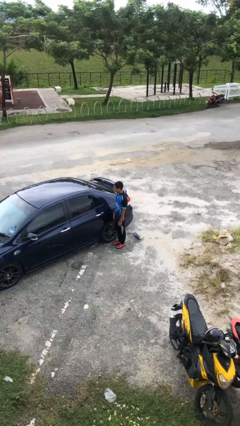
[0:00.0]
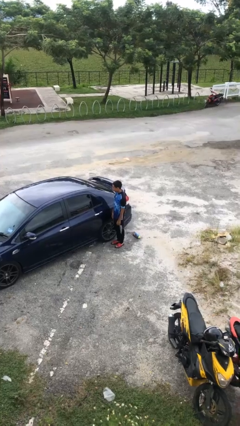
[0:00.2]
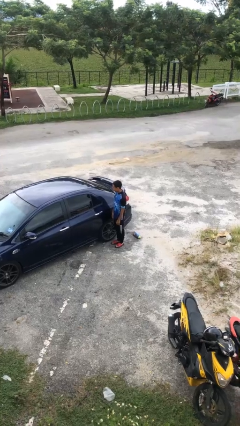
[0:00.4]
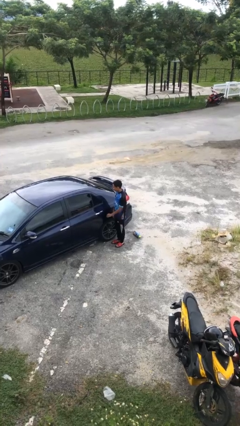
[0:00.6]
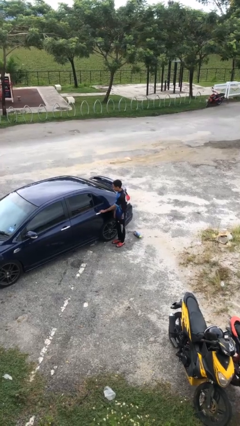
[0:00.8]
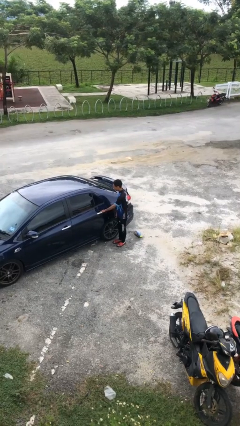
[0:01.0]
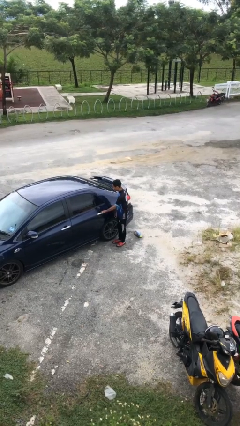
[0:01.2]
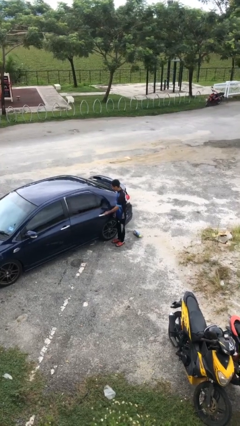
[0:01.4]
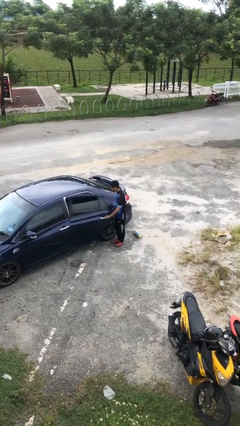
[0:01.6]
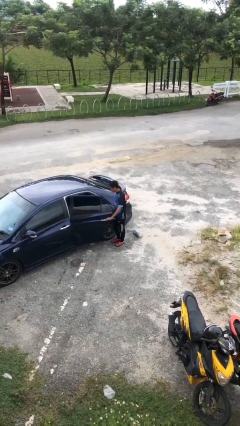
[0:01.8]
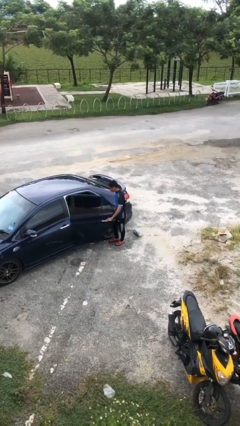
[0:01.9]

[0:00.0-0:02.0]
person opens car door

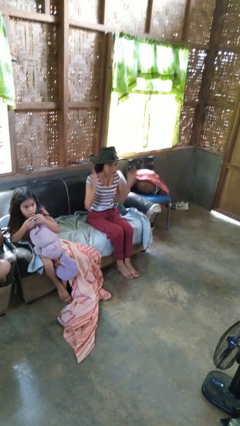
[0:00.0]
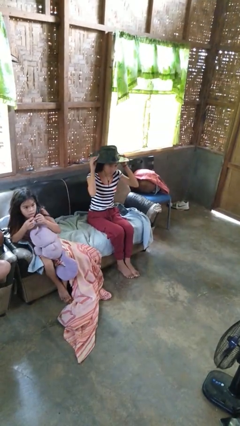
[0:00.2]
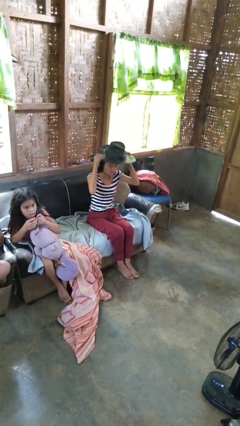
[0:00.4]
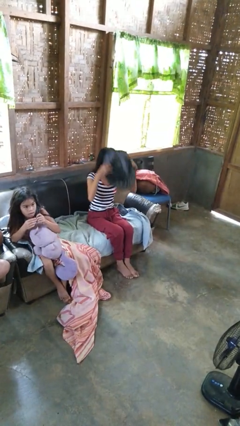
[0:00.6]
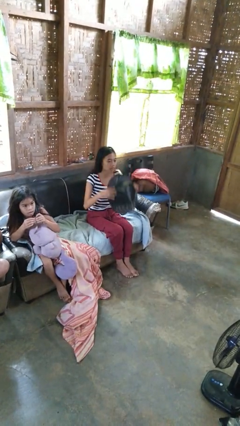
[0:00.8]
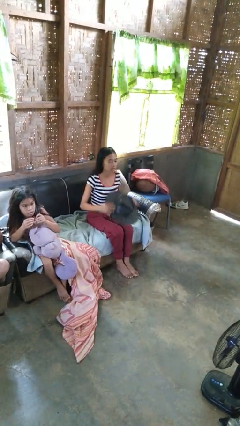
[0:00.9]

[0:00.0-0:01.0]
person takes off hat

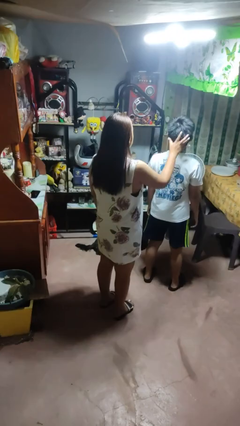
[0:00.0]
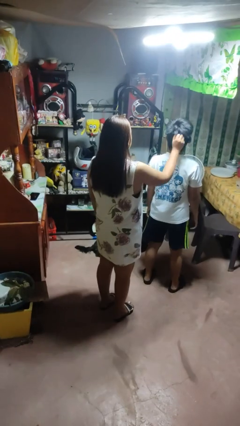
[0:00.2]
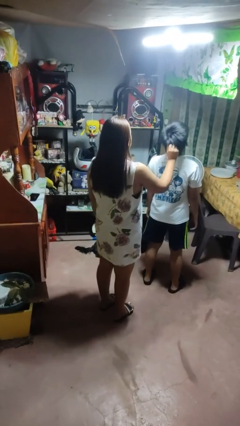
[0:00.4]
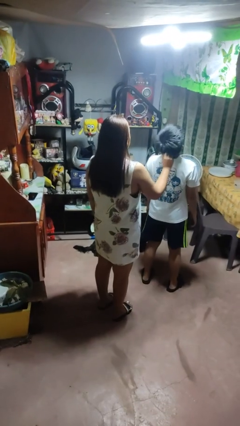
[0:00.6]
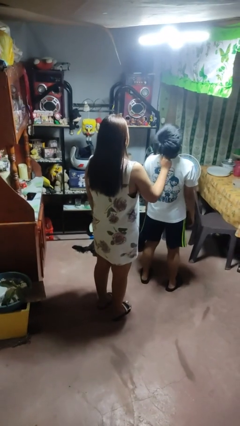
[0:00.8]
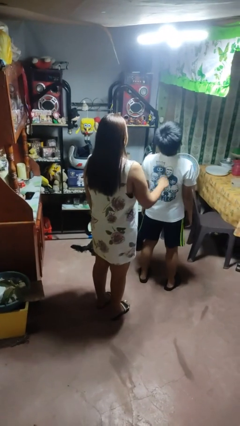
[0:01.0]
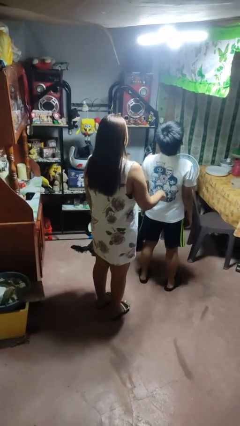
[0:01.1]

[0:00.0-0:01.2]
person grabs person by hair

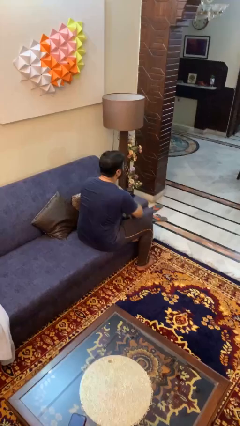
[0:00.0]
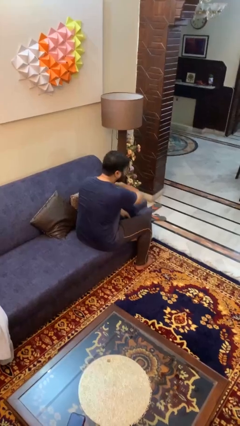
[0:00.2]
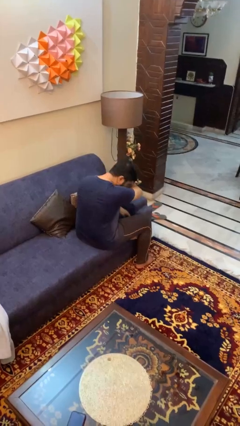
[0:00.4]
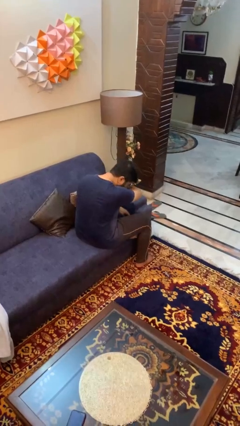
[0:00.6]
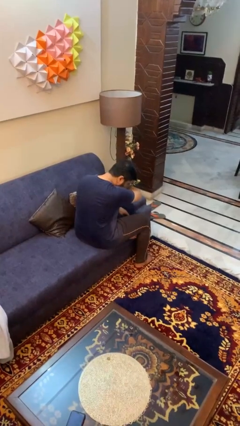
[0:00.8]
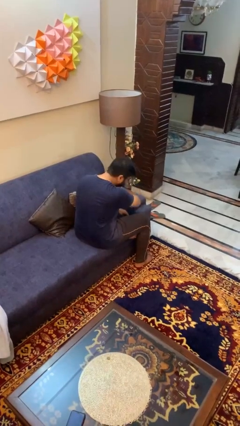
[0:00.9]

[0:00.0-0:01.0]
person sneezes into arm

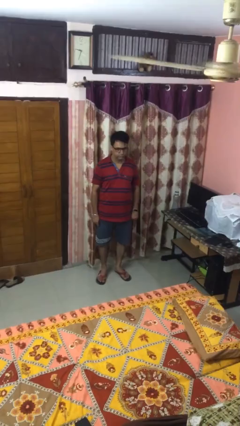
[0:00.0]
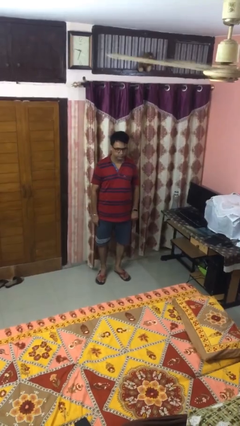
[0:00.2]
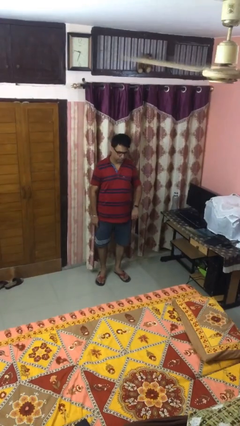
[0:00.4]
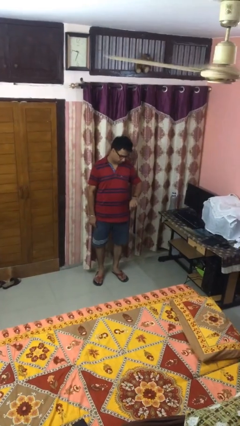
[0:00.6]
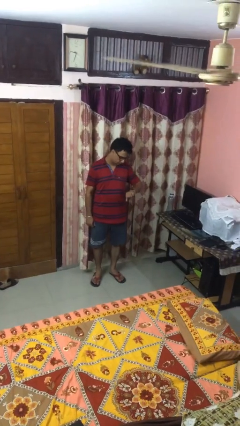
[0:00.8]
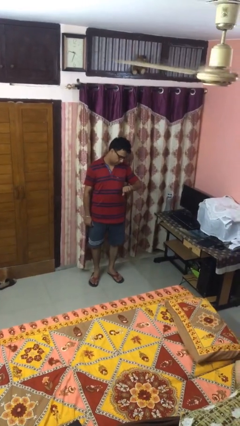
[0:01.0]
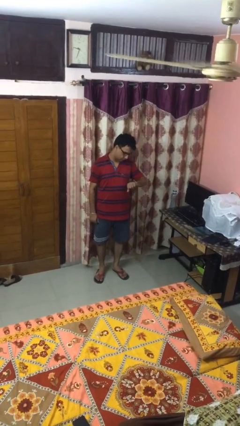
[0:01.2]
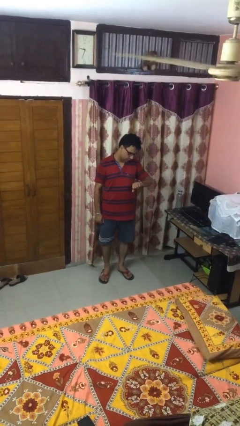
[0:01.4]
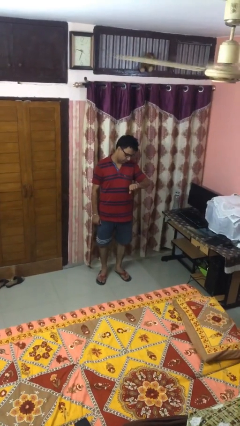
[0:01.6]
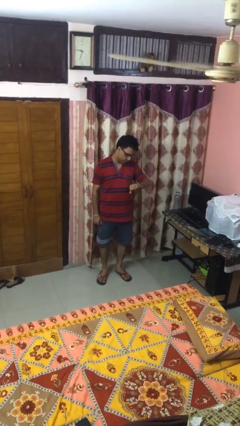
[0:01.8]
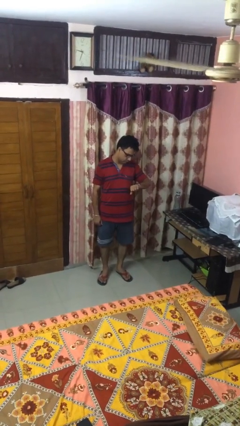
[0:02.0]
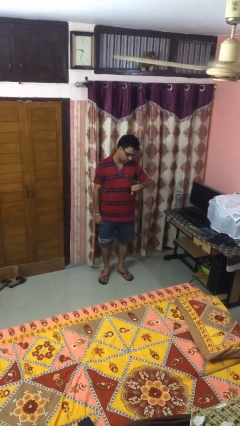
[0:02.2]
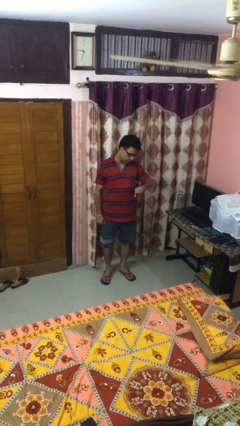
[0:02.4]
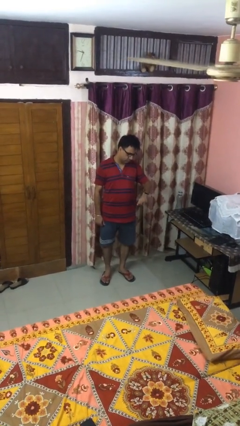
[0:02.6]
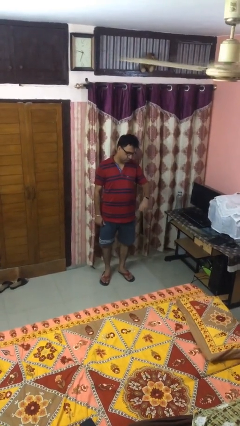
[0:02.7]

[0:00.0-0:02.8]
person looks at wristwatch

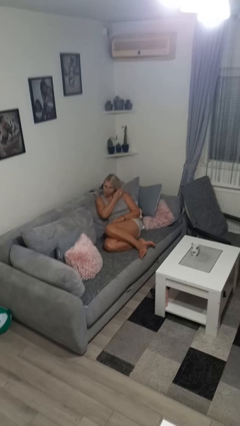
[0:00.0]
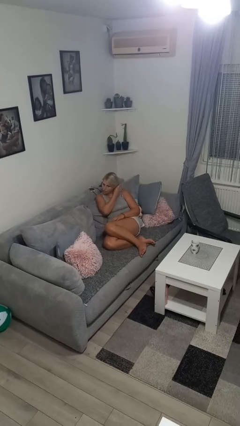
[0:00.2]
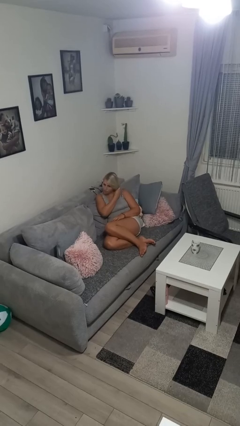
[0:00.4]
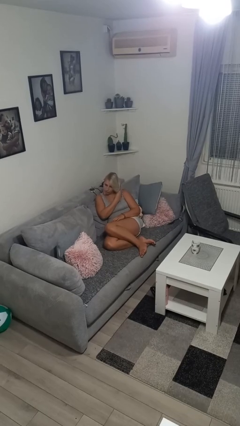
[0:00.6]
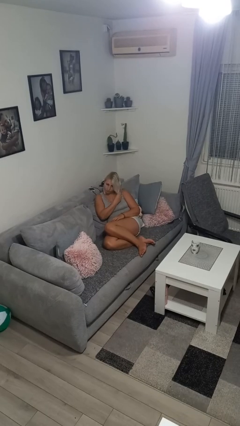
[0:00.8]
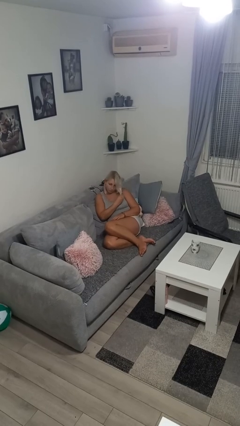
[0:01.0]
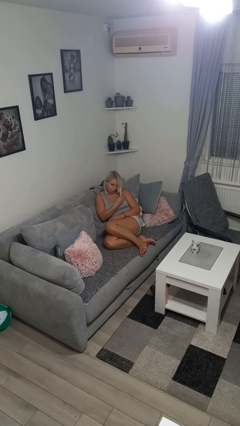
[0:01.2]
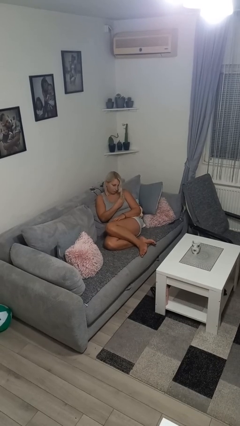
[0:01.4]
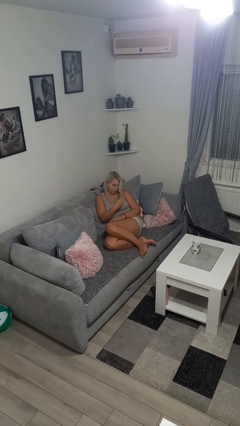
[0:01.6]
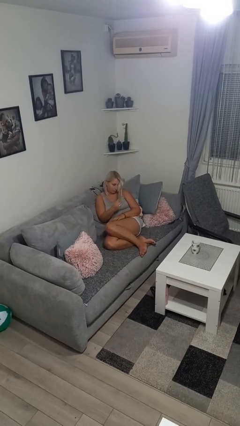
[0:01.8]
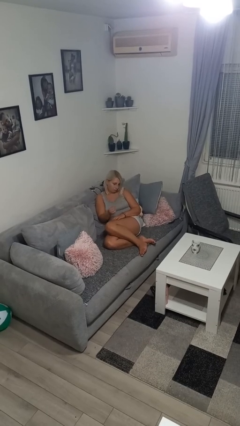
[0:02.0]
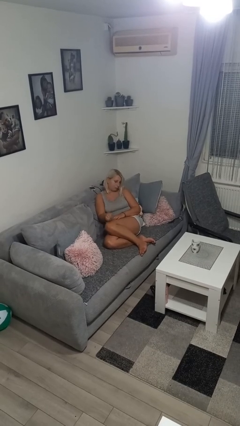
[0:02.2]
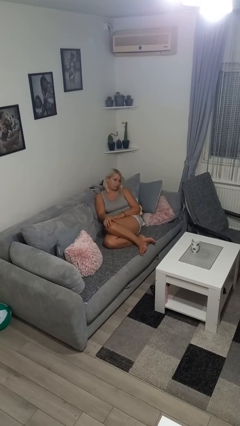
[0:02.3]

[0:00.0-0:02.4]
person strokes hair

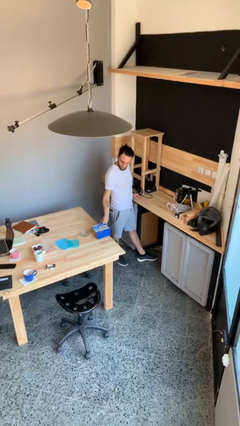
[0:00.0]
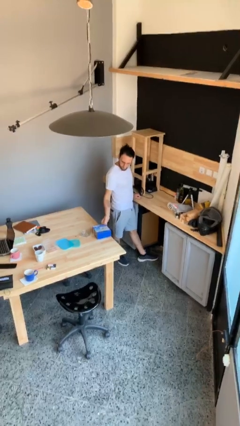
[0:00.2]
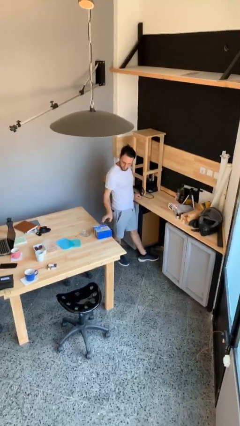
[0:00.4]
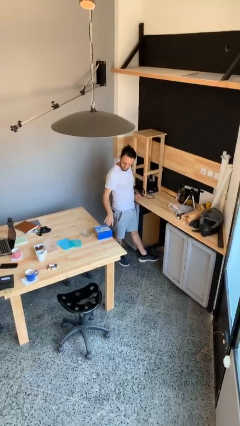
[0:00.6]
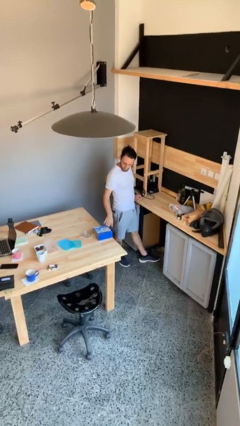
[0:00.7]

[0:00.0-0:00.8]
person puts down object on table

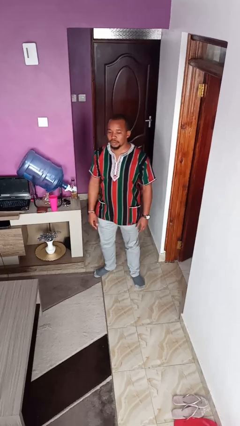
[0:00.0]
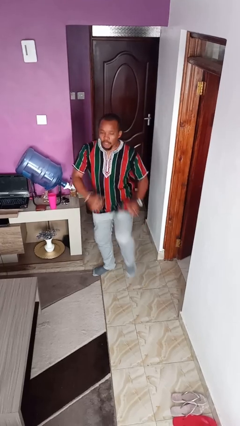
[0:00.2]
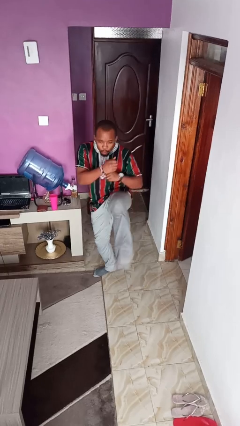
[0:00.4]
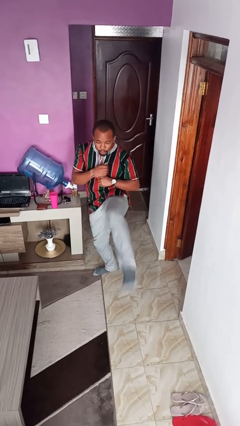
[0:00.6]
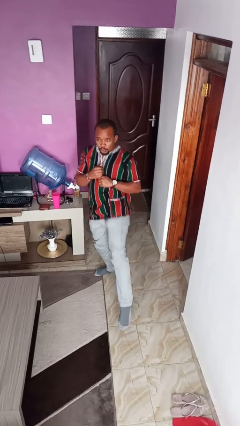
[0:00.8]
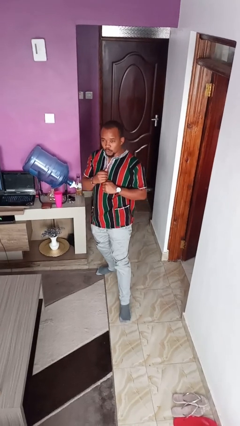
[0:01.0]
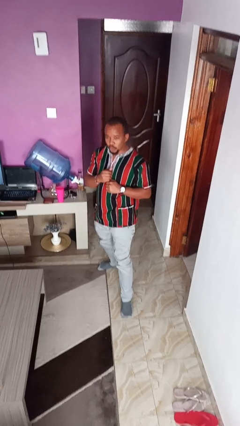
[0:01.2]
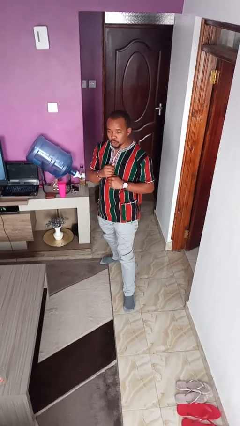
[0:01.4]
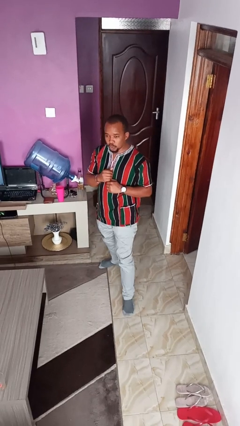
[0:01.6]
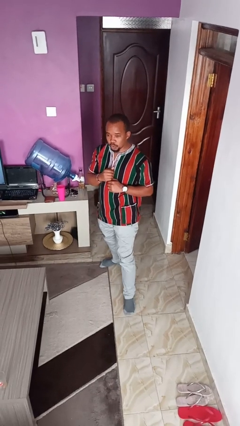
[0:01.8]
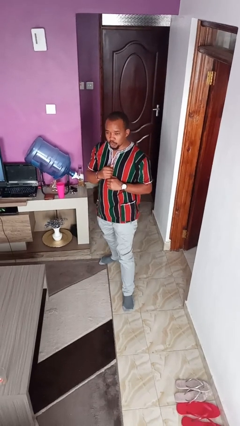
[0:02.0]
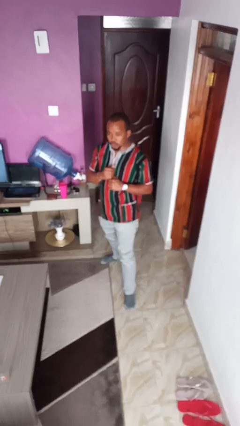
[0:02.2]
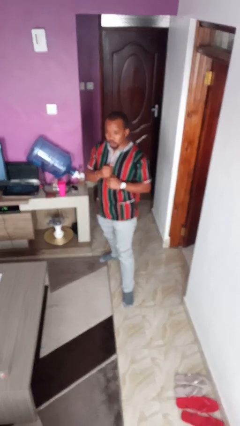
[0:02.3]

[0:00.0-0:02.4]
person karate kicks

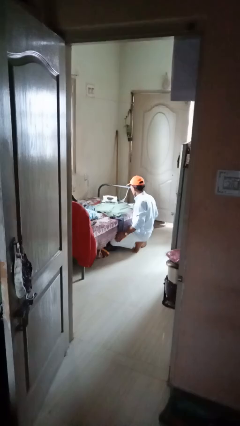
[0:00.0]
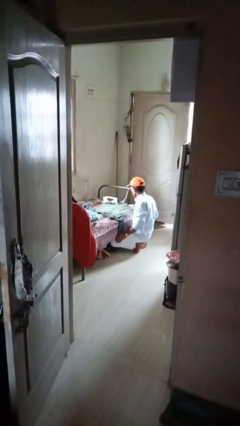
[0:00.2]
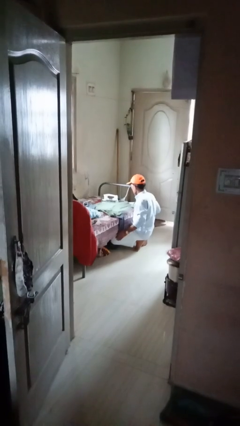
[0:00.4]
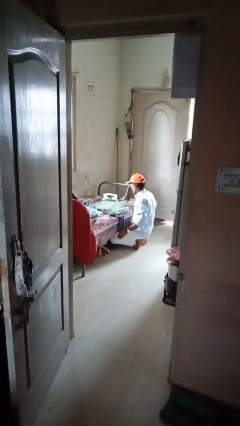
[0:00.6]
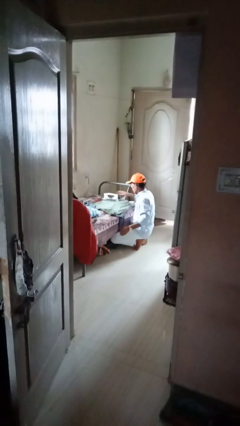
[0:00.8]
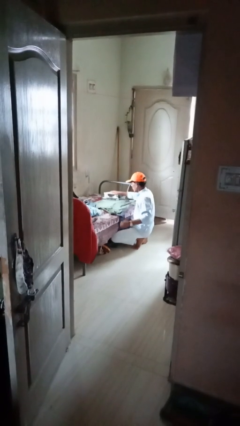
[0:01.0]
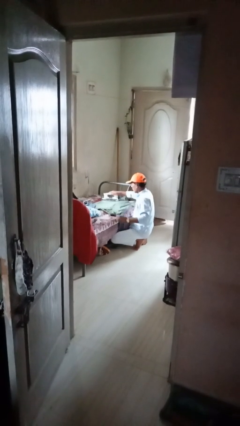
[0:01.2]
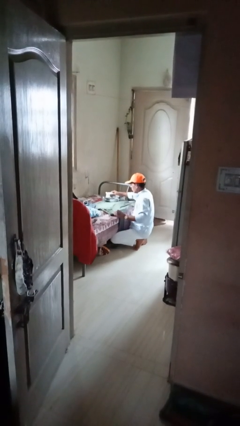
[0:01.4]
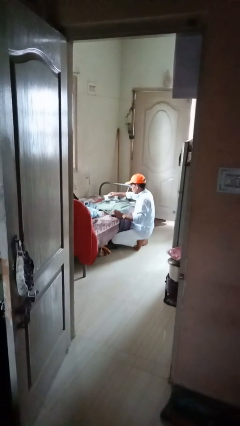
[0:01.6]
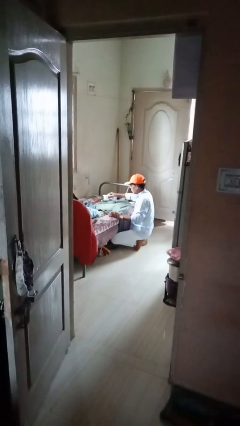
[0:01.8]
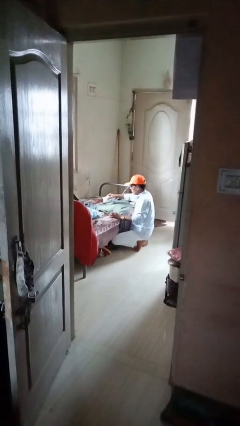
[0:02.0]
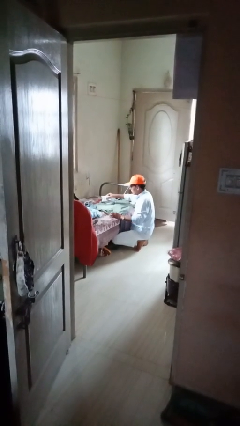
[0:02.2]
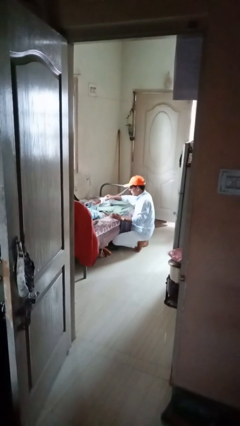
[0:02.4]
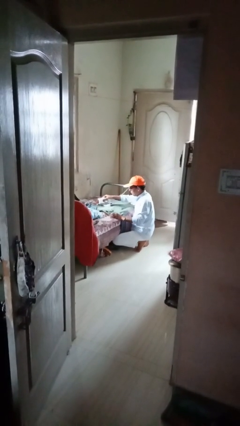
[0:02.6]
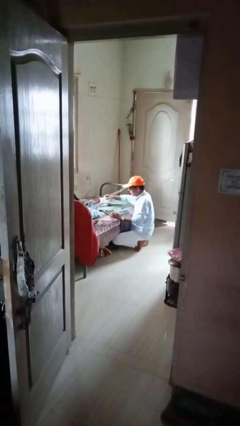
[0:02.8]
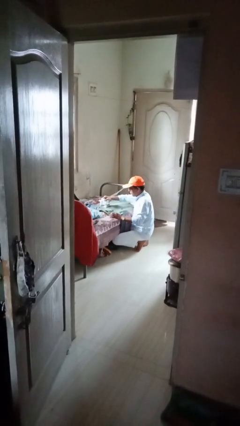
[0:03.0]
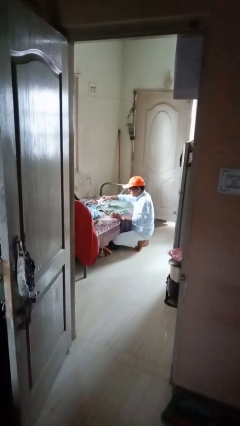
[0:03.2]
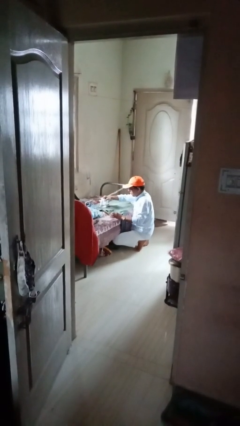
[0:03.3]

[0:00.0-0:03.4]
person irons clothes
